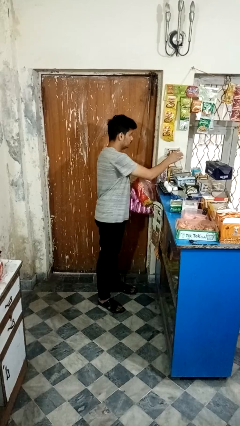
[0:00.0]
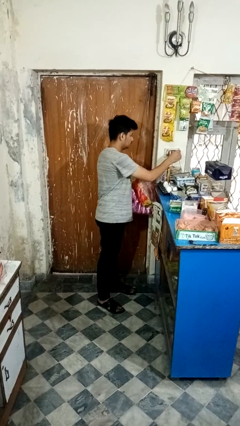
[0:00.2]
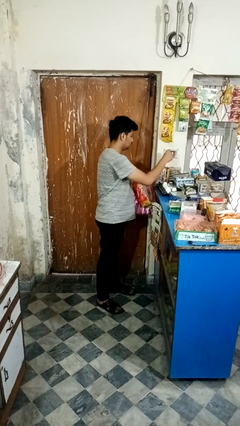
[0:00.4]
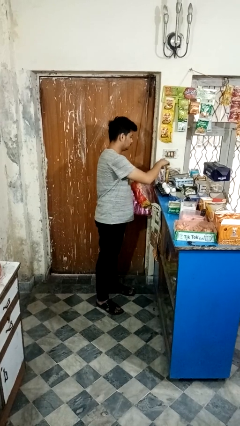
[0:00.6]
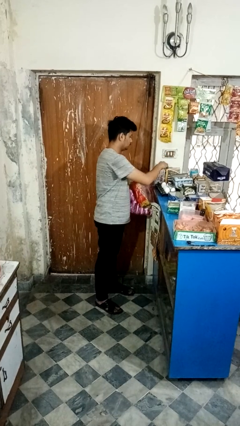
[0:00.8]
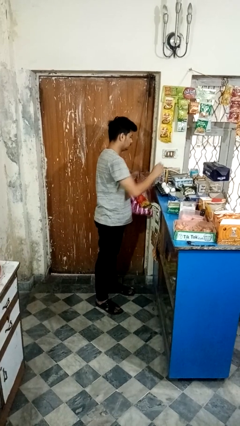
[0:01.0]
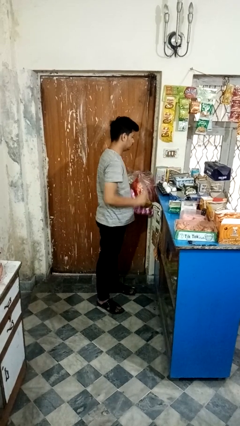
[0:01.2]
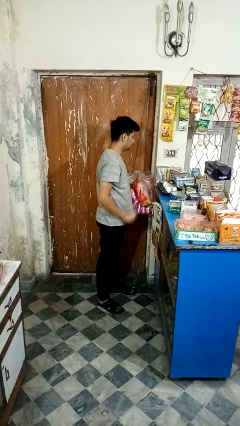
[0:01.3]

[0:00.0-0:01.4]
person unplugs from electrical socket

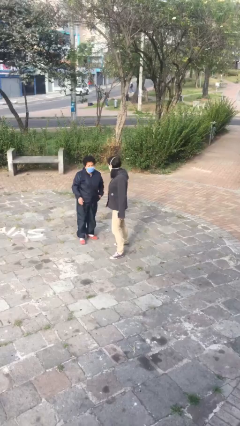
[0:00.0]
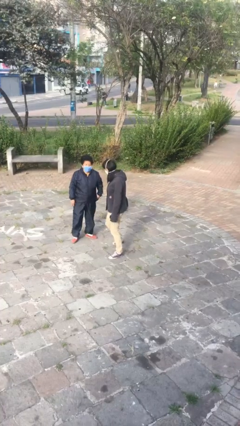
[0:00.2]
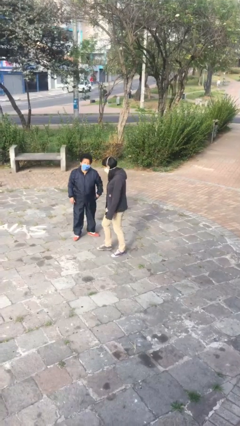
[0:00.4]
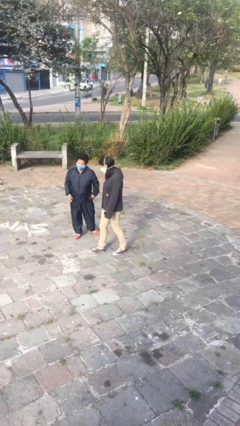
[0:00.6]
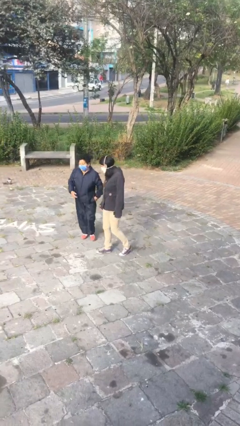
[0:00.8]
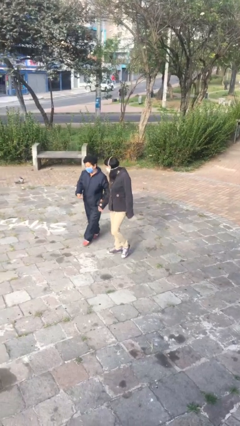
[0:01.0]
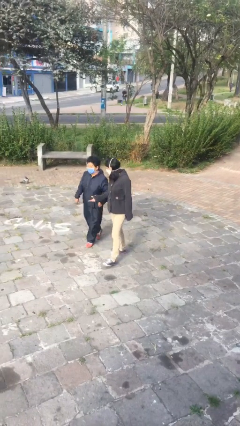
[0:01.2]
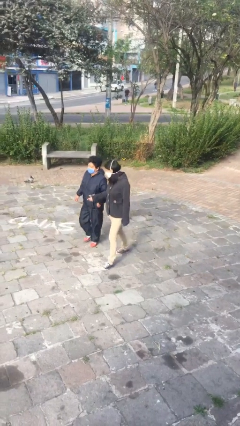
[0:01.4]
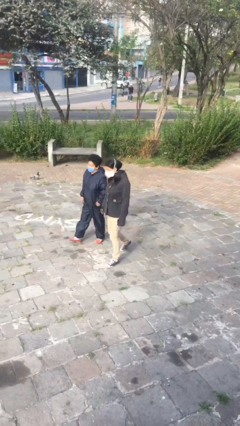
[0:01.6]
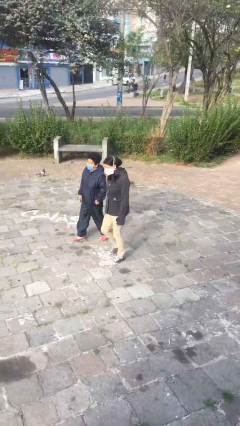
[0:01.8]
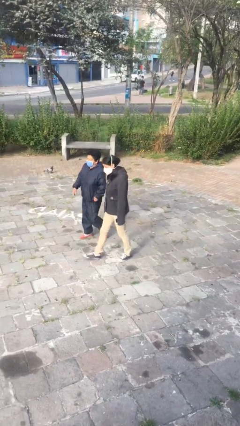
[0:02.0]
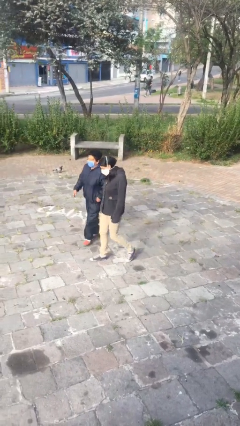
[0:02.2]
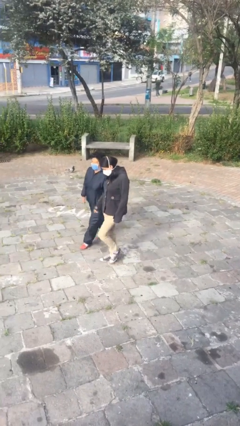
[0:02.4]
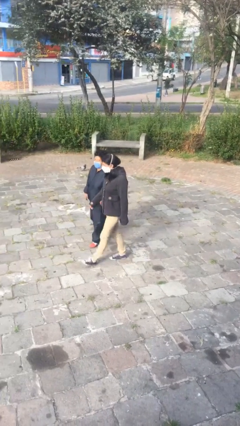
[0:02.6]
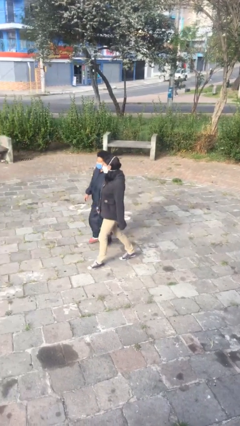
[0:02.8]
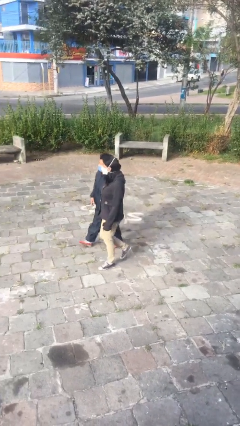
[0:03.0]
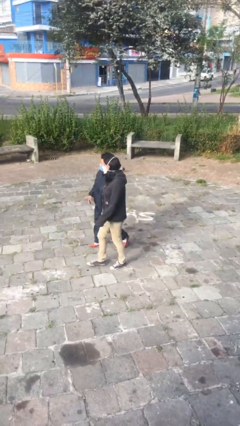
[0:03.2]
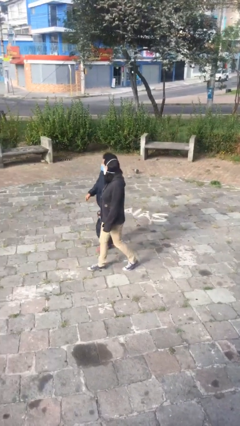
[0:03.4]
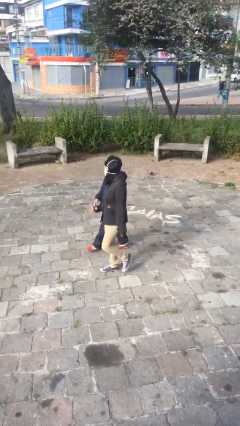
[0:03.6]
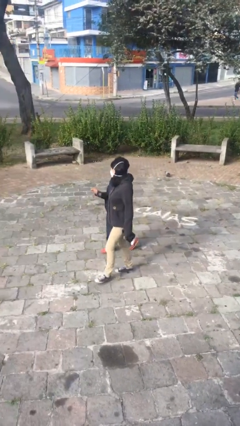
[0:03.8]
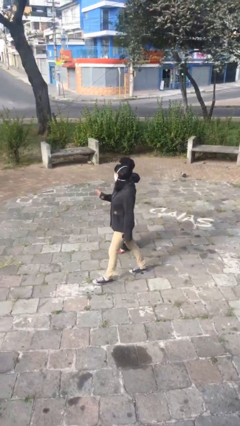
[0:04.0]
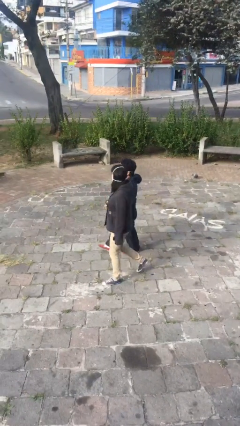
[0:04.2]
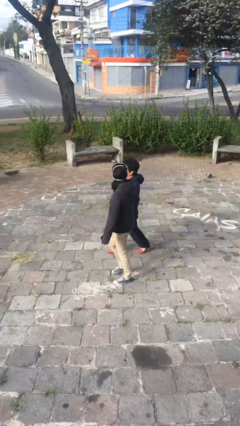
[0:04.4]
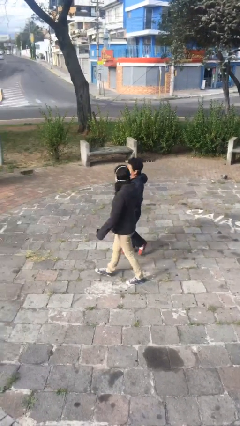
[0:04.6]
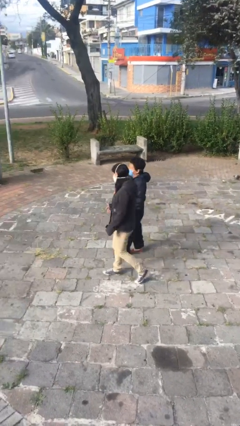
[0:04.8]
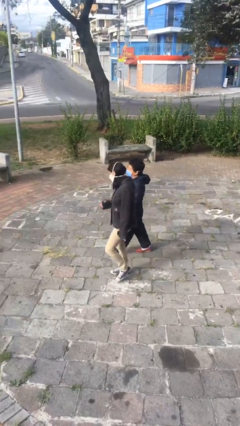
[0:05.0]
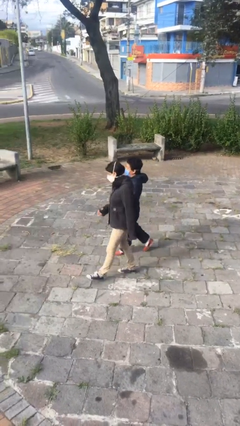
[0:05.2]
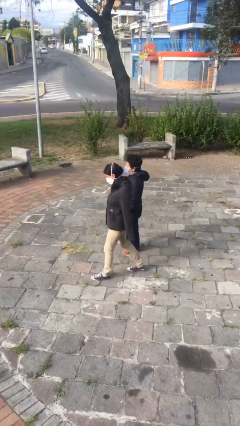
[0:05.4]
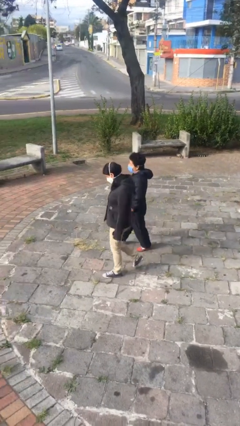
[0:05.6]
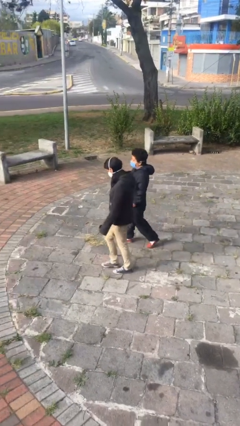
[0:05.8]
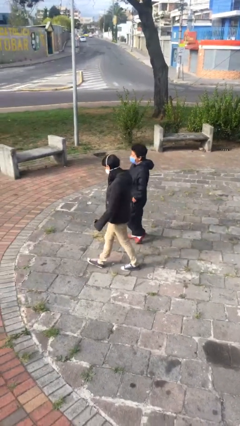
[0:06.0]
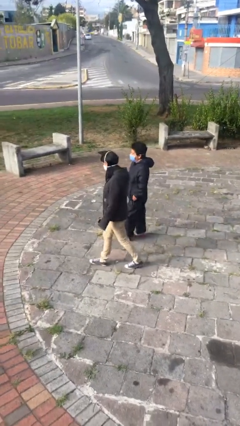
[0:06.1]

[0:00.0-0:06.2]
person talks to person

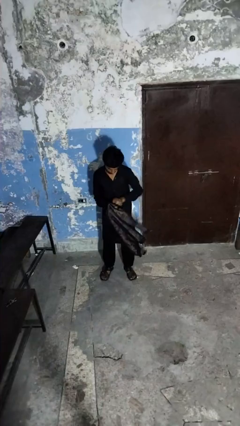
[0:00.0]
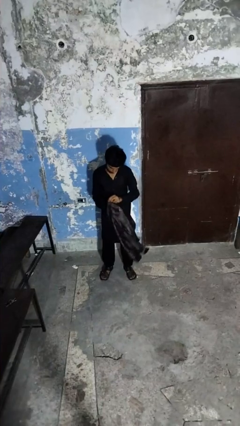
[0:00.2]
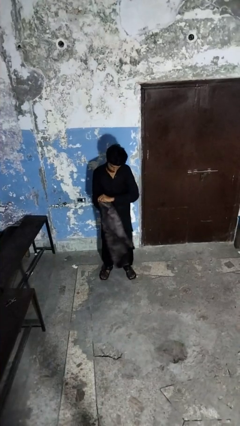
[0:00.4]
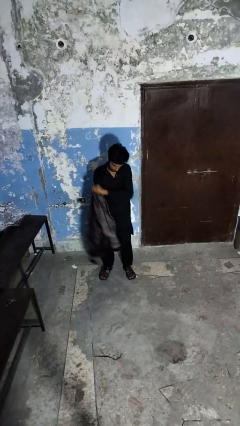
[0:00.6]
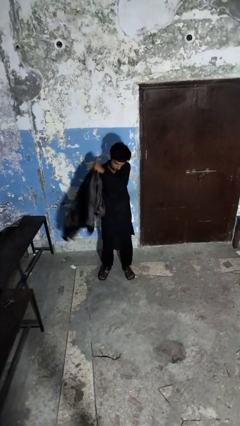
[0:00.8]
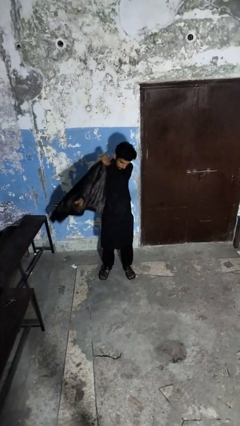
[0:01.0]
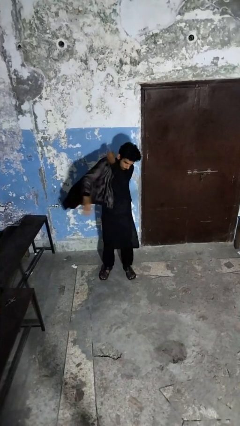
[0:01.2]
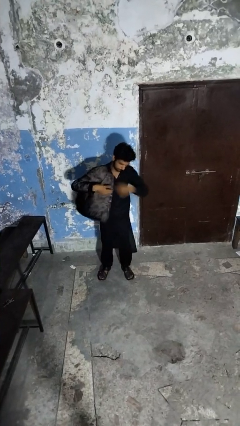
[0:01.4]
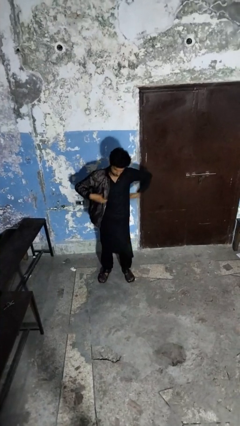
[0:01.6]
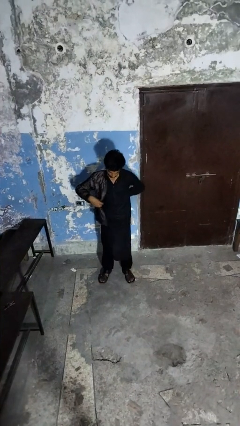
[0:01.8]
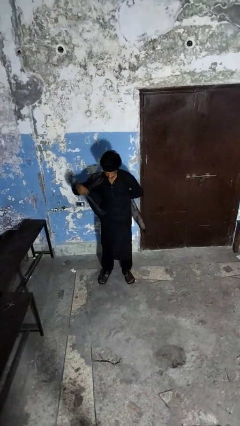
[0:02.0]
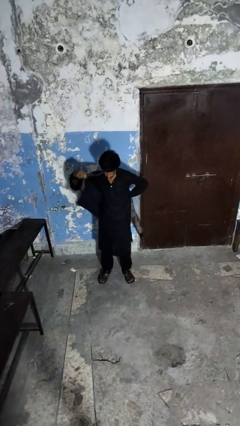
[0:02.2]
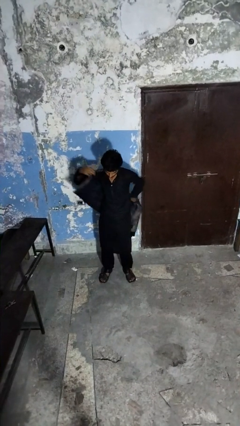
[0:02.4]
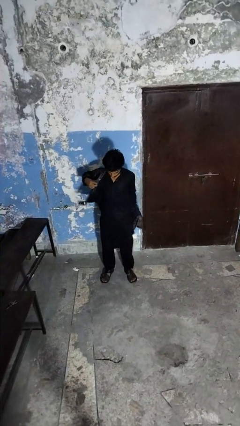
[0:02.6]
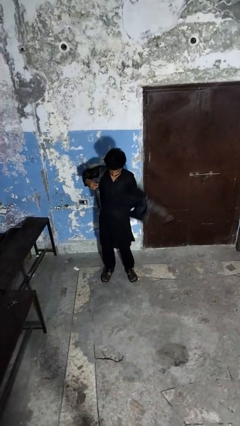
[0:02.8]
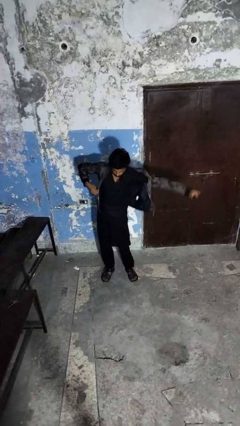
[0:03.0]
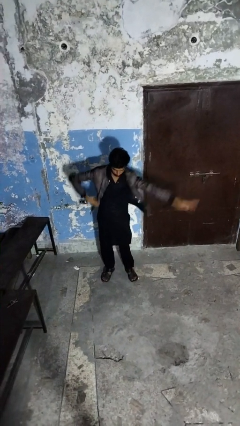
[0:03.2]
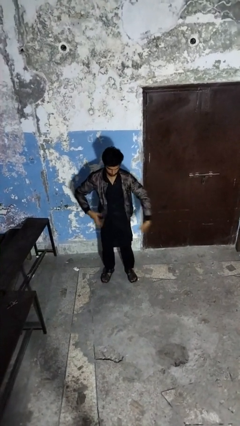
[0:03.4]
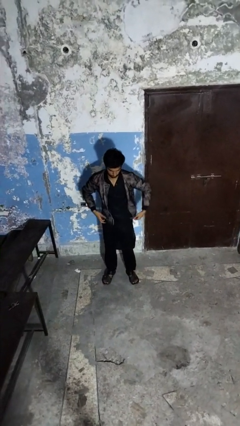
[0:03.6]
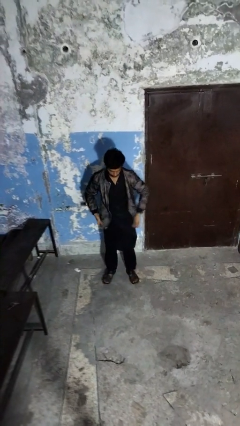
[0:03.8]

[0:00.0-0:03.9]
person puts on jacket

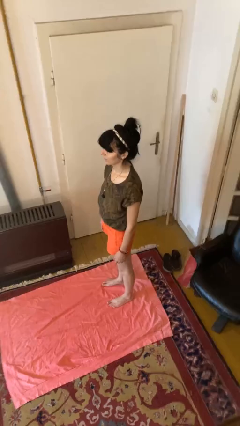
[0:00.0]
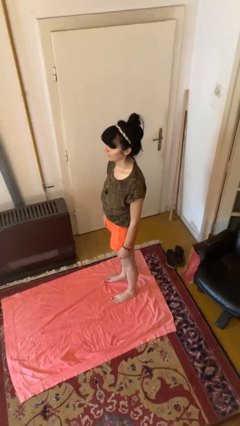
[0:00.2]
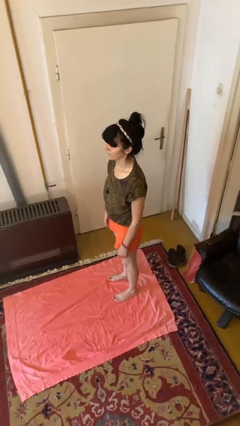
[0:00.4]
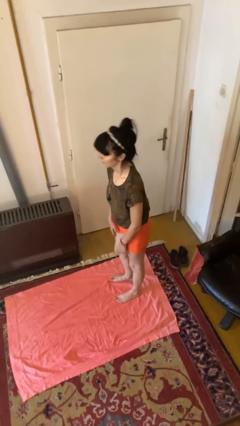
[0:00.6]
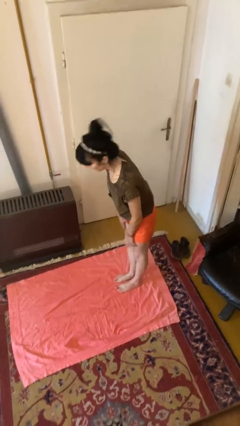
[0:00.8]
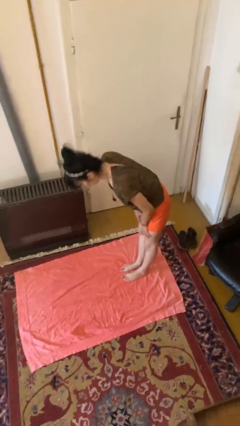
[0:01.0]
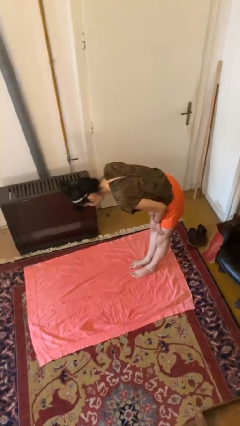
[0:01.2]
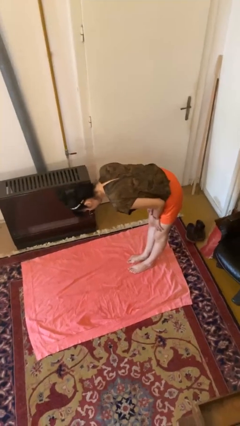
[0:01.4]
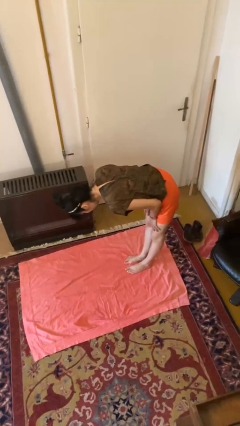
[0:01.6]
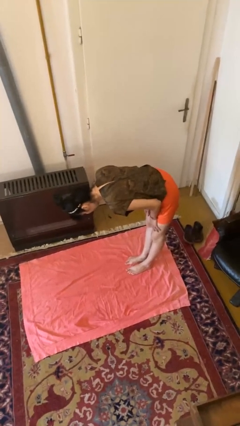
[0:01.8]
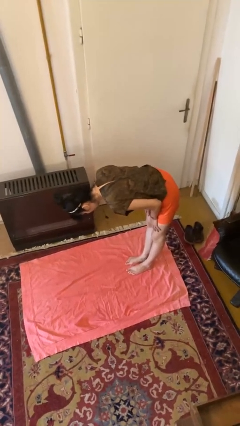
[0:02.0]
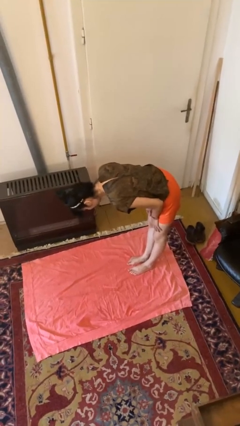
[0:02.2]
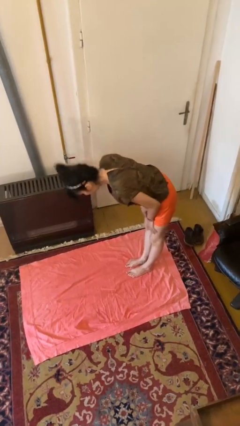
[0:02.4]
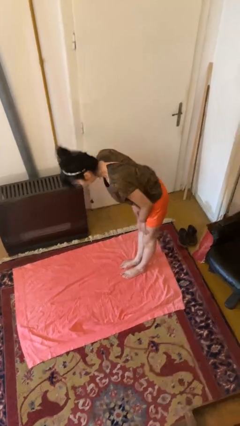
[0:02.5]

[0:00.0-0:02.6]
person bows

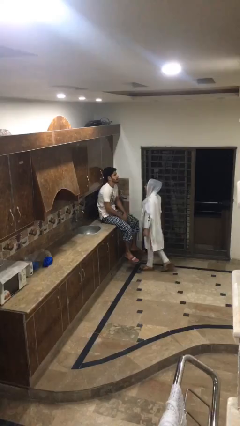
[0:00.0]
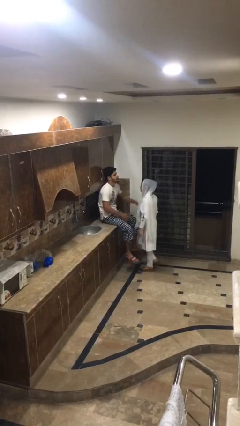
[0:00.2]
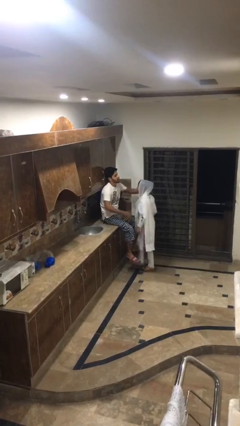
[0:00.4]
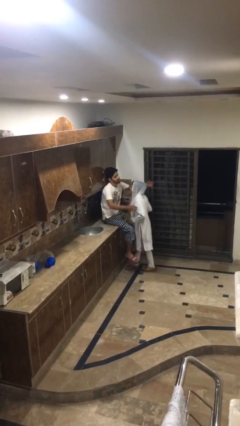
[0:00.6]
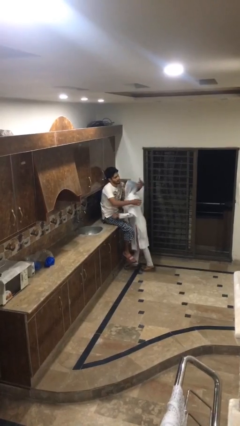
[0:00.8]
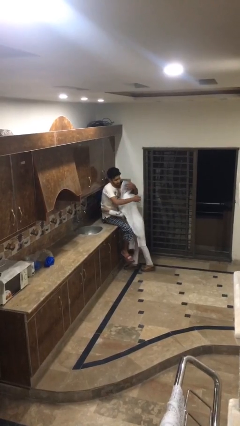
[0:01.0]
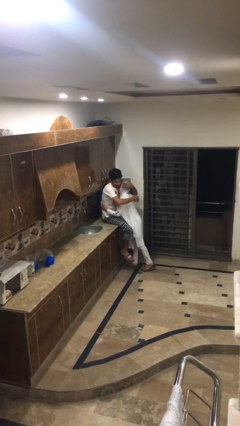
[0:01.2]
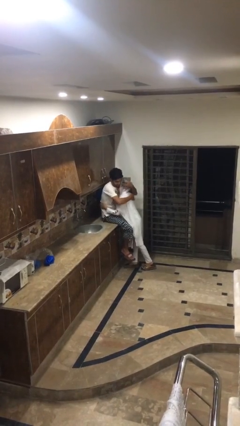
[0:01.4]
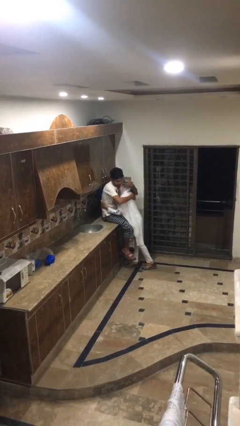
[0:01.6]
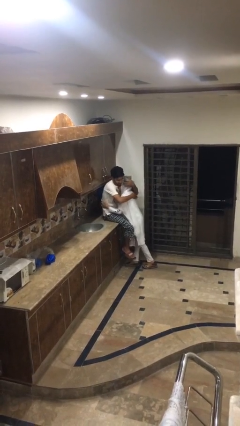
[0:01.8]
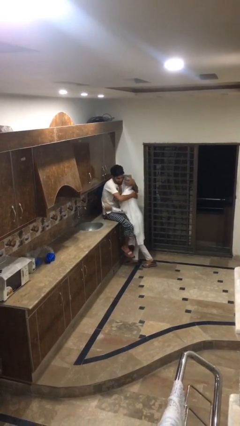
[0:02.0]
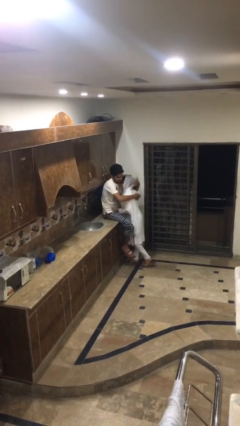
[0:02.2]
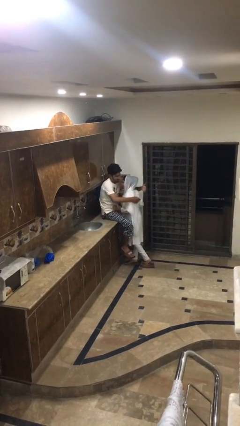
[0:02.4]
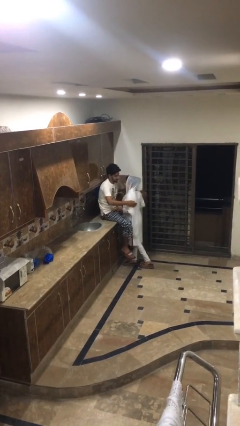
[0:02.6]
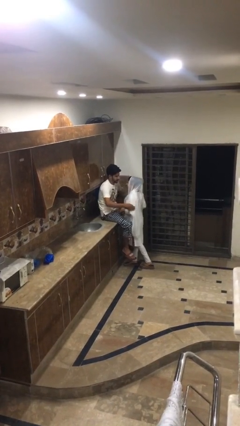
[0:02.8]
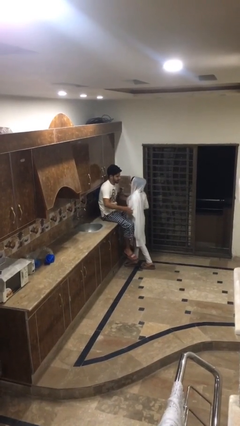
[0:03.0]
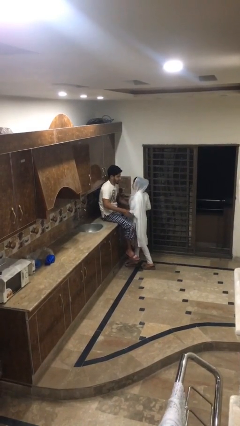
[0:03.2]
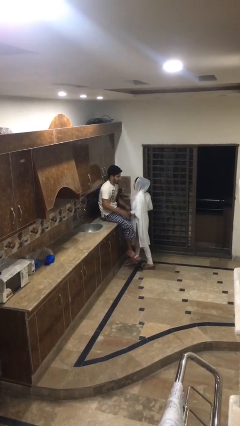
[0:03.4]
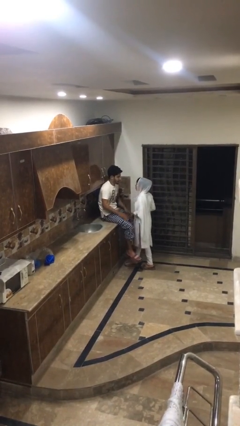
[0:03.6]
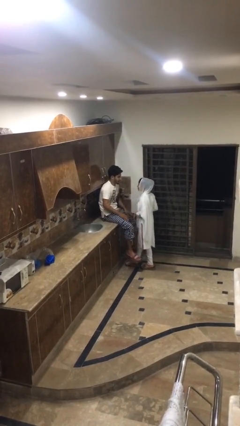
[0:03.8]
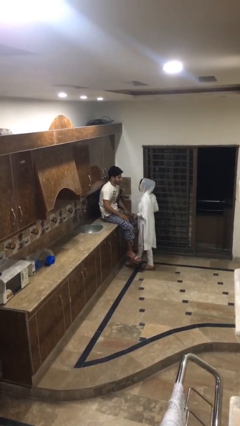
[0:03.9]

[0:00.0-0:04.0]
person embraces person
